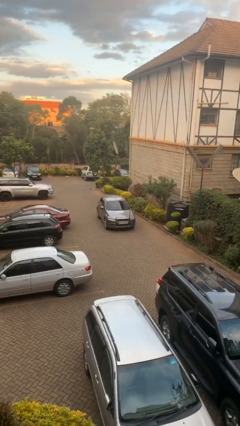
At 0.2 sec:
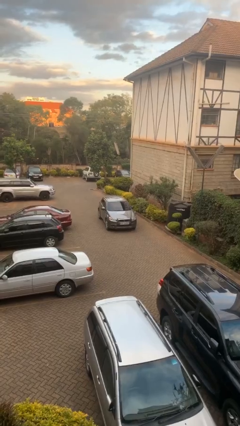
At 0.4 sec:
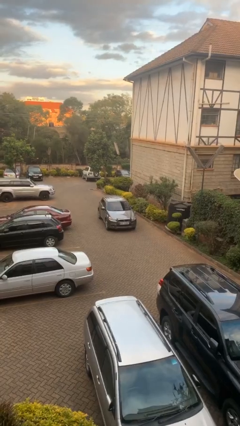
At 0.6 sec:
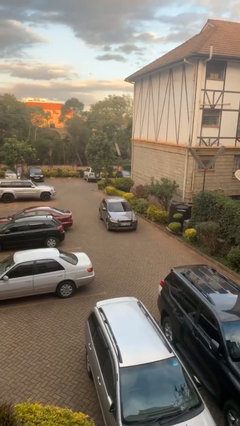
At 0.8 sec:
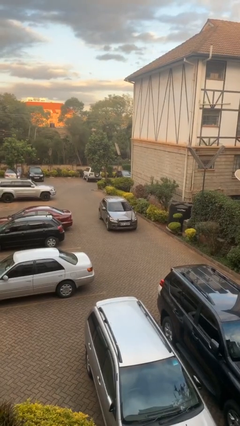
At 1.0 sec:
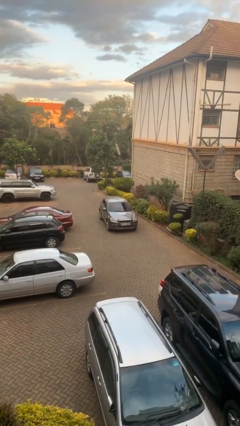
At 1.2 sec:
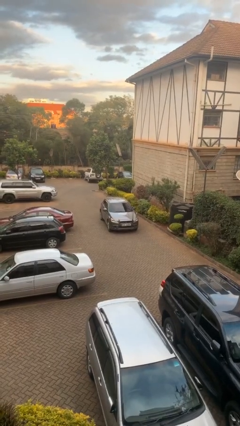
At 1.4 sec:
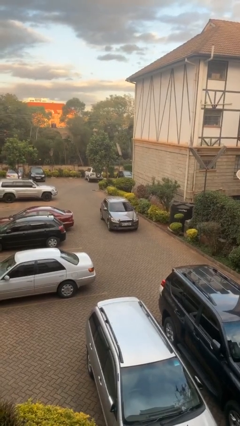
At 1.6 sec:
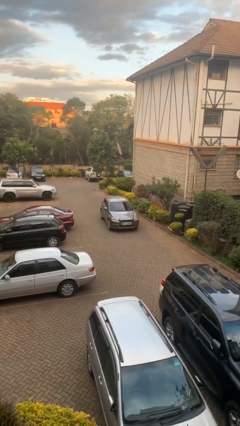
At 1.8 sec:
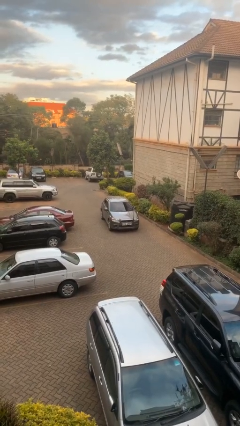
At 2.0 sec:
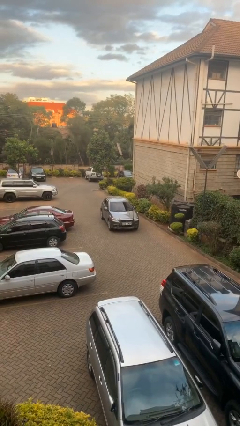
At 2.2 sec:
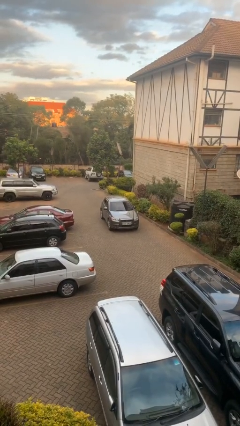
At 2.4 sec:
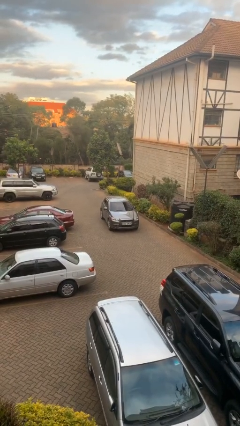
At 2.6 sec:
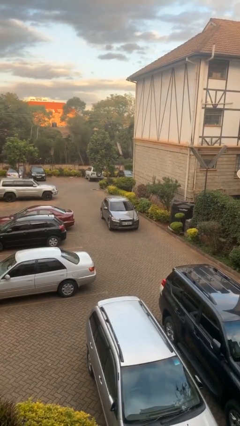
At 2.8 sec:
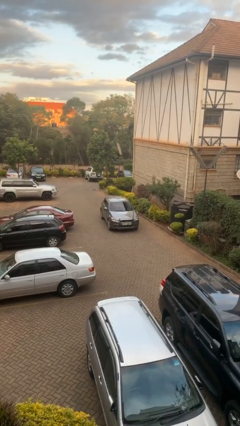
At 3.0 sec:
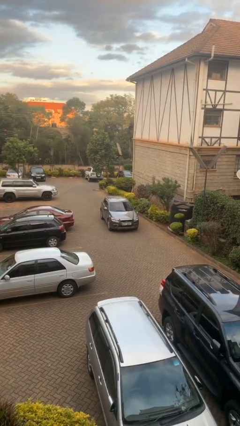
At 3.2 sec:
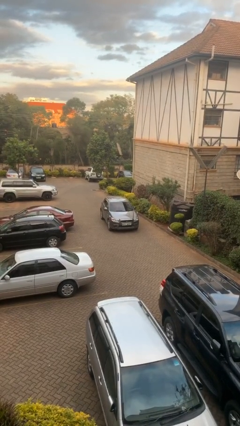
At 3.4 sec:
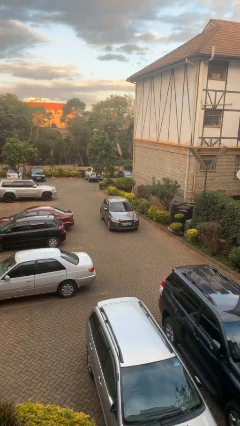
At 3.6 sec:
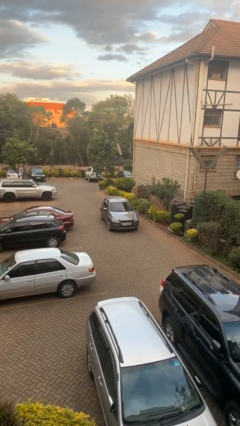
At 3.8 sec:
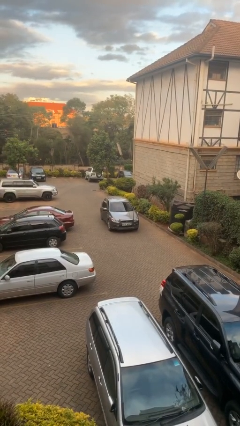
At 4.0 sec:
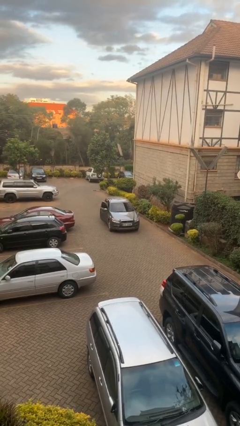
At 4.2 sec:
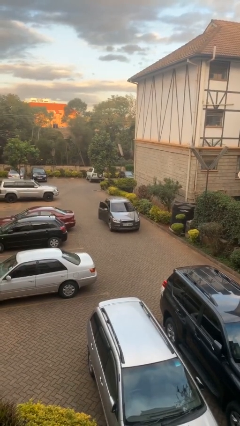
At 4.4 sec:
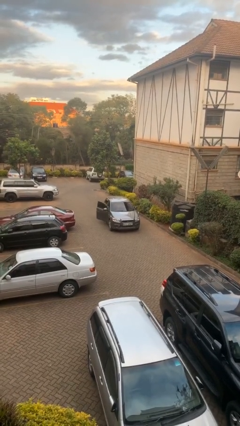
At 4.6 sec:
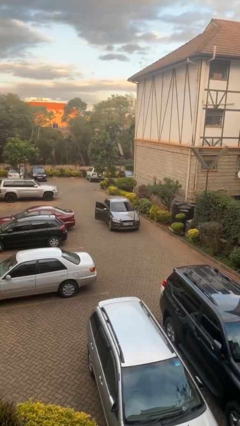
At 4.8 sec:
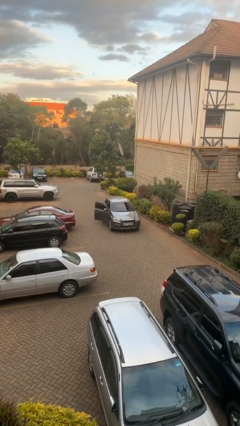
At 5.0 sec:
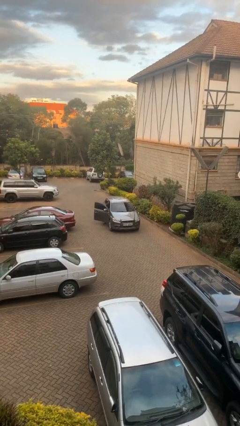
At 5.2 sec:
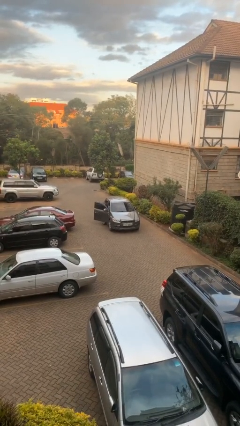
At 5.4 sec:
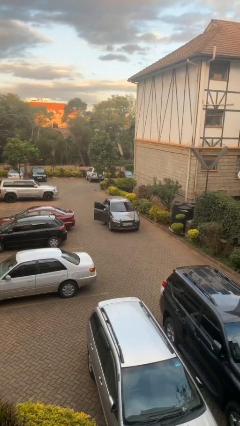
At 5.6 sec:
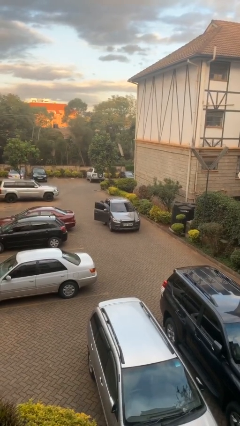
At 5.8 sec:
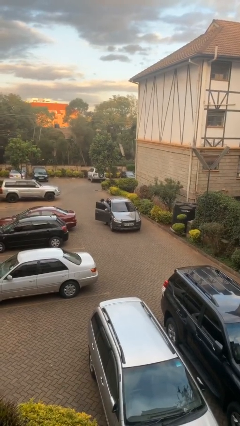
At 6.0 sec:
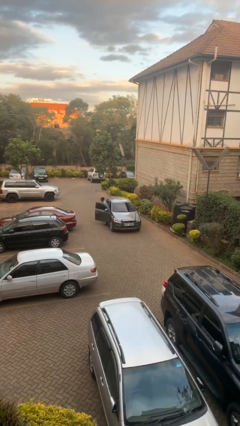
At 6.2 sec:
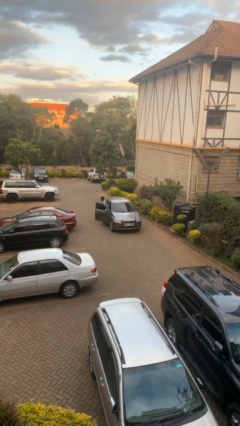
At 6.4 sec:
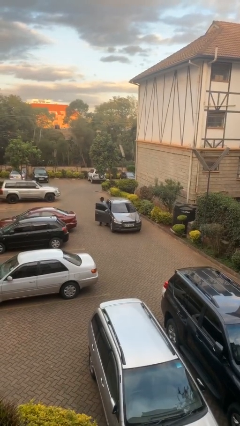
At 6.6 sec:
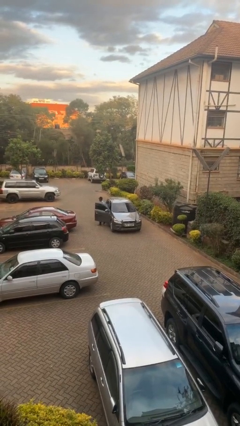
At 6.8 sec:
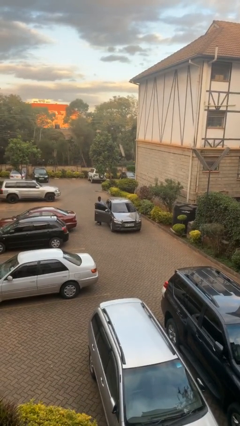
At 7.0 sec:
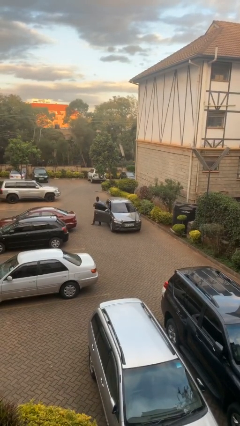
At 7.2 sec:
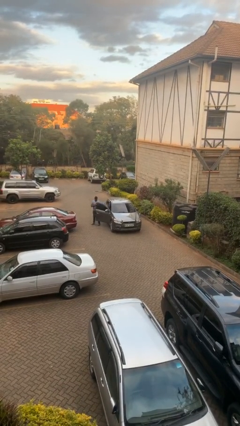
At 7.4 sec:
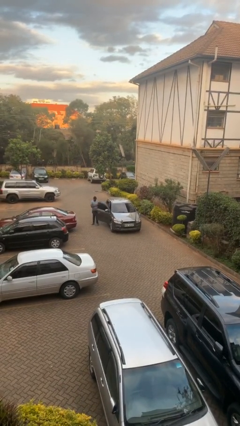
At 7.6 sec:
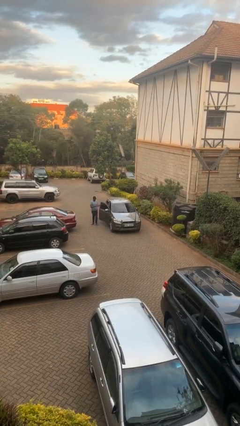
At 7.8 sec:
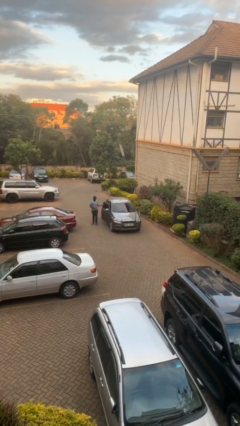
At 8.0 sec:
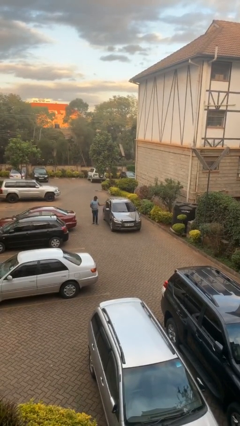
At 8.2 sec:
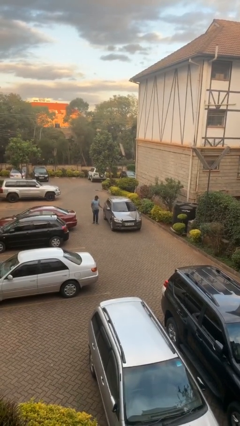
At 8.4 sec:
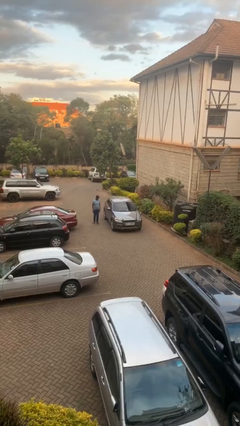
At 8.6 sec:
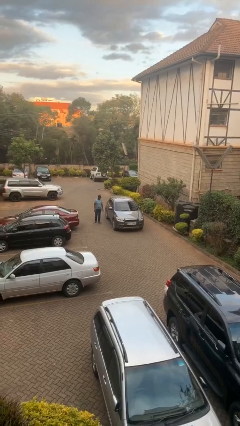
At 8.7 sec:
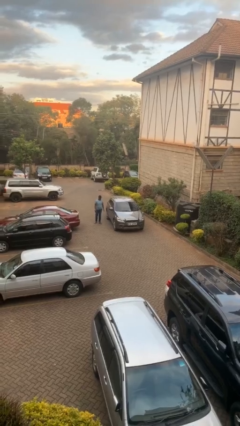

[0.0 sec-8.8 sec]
car drops off person

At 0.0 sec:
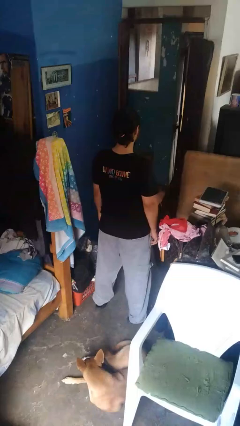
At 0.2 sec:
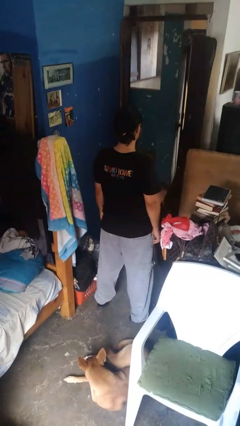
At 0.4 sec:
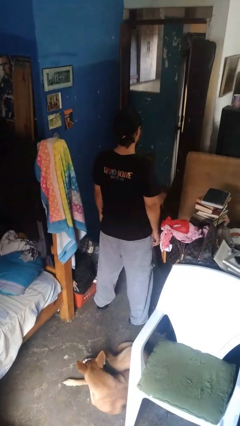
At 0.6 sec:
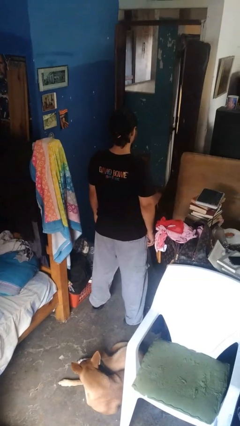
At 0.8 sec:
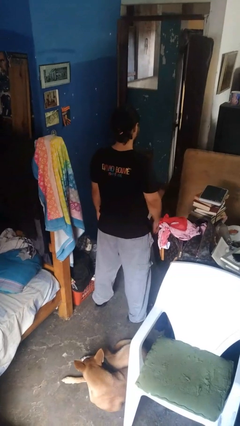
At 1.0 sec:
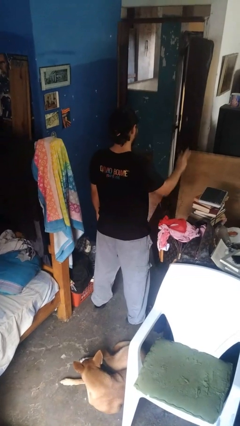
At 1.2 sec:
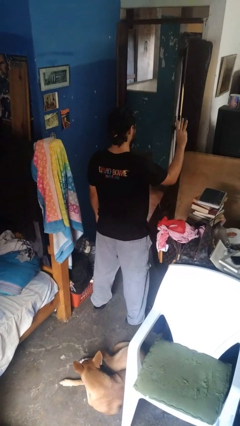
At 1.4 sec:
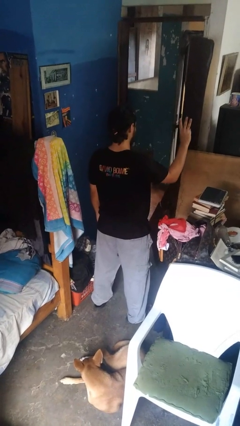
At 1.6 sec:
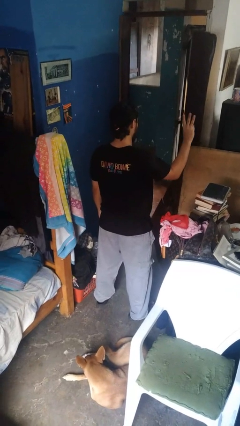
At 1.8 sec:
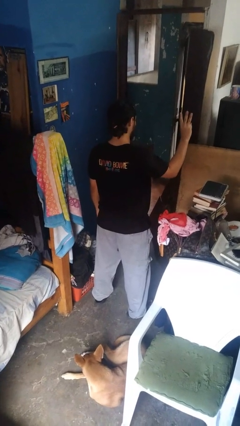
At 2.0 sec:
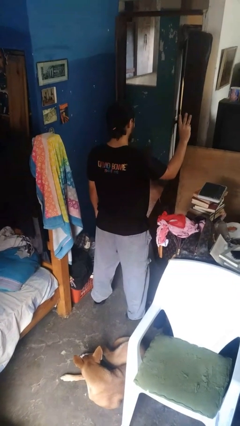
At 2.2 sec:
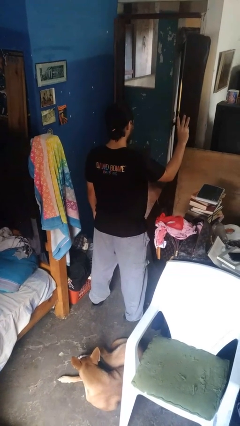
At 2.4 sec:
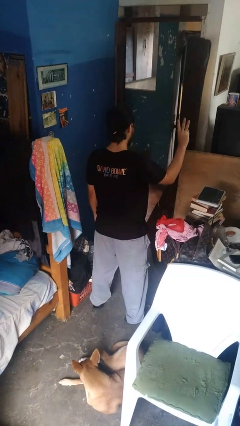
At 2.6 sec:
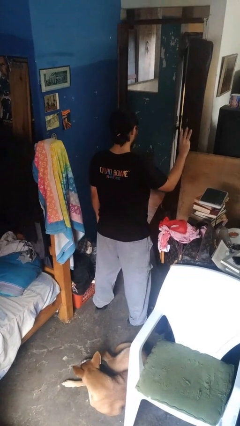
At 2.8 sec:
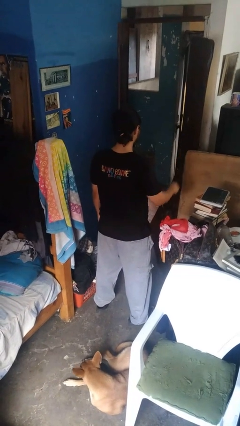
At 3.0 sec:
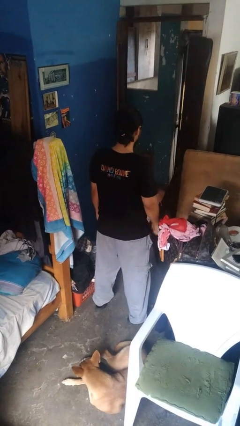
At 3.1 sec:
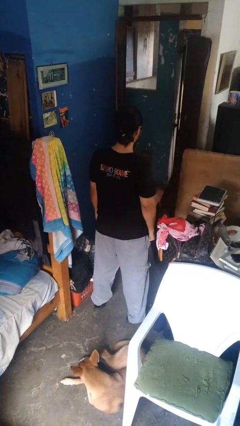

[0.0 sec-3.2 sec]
person gestures number three

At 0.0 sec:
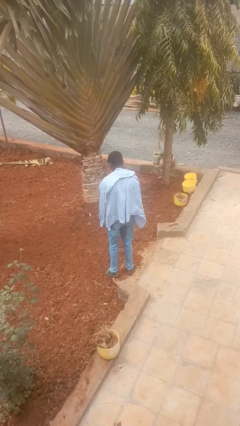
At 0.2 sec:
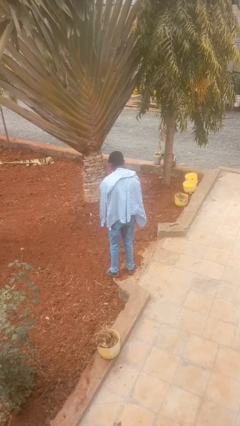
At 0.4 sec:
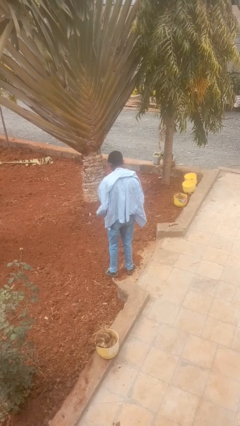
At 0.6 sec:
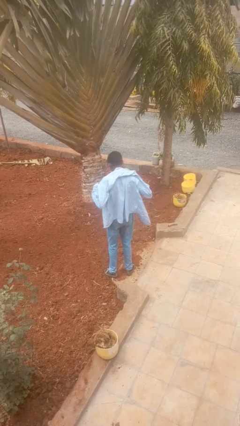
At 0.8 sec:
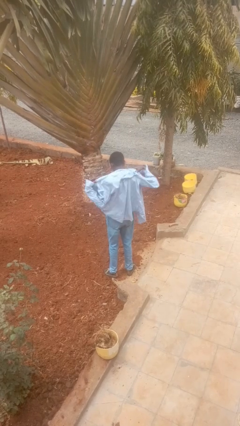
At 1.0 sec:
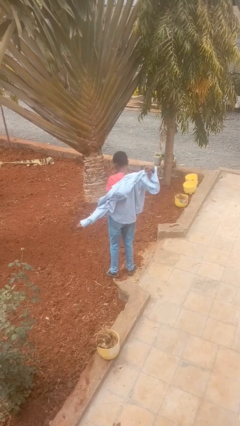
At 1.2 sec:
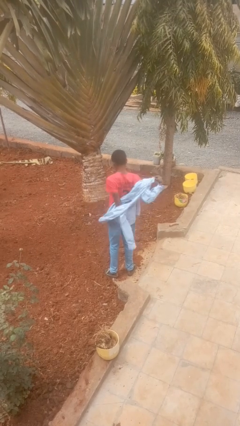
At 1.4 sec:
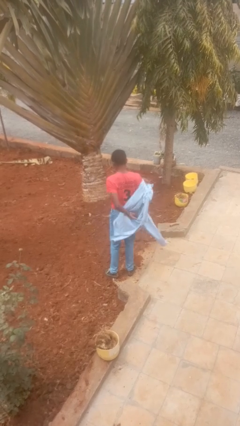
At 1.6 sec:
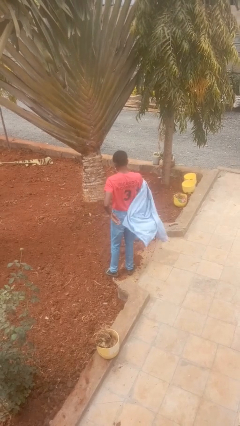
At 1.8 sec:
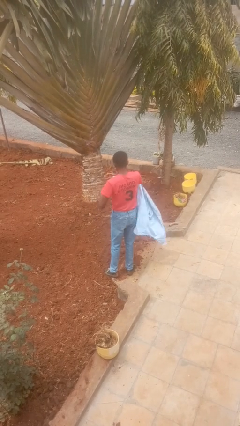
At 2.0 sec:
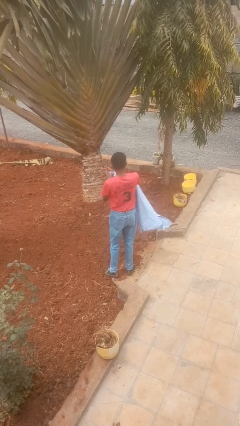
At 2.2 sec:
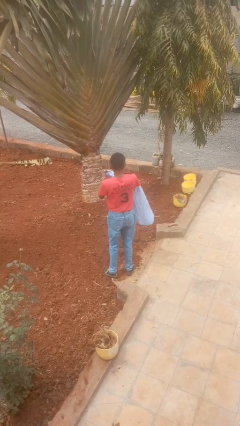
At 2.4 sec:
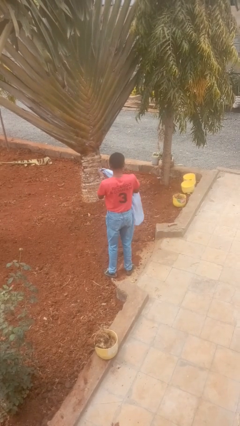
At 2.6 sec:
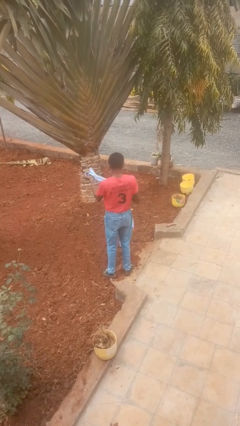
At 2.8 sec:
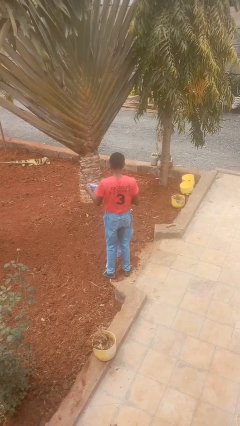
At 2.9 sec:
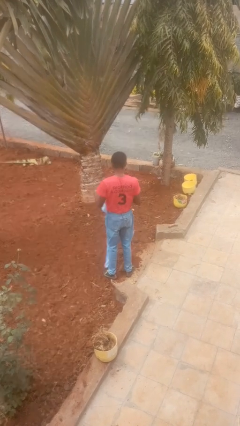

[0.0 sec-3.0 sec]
person takes off shirt

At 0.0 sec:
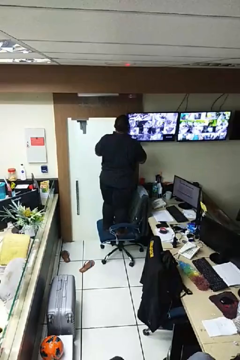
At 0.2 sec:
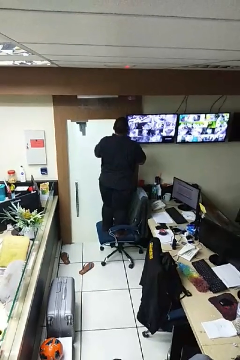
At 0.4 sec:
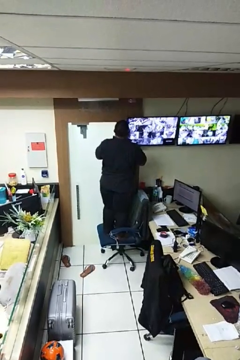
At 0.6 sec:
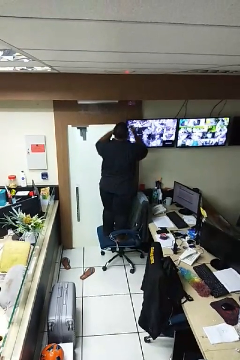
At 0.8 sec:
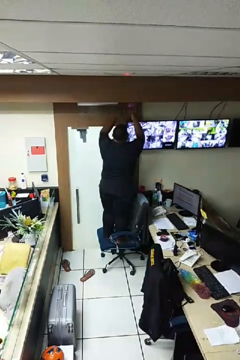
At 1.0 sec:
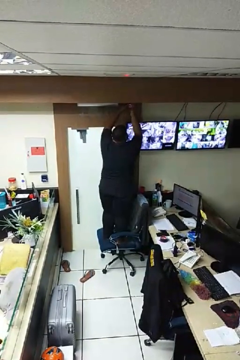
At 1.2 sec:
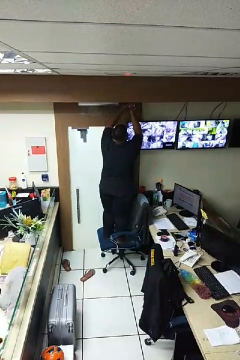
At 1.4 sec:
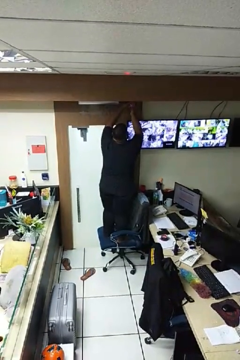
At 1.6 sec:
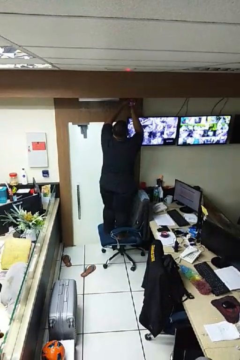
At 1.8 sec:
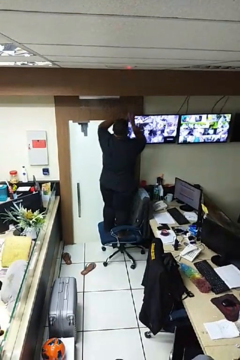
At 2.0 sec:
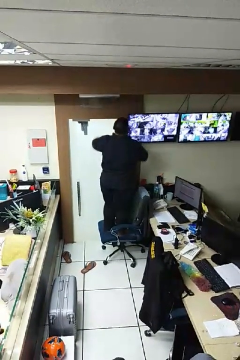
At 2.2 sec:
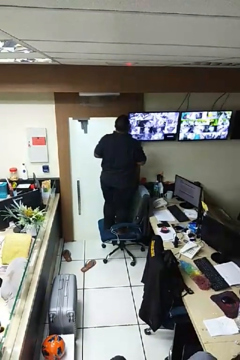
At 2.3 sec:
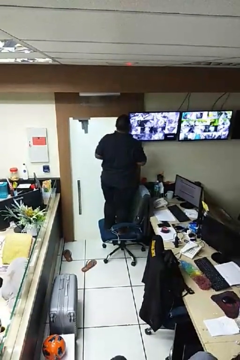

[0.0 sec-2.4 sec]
person takes down smoke detector

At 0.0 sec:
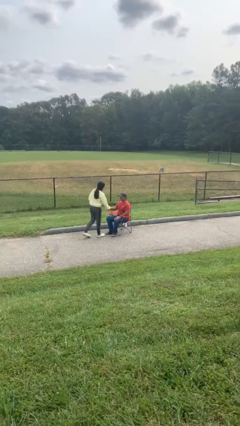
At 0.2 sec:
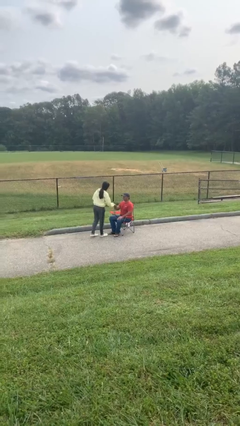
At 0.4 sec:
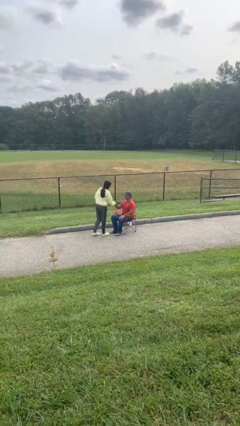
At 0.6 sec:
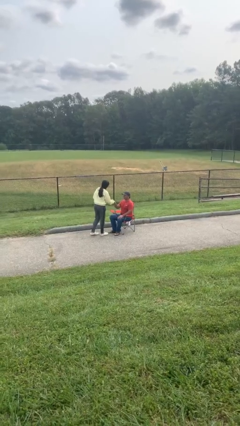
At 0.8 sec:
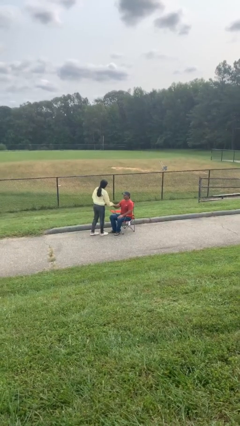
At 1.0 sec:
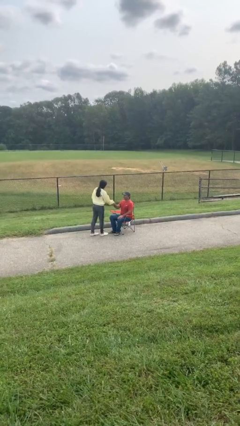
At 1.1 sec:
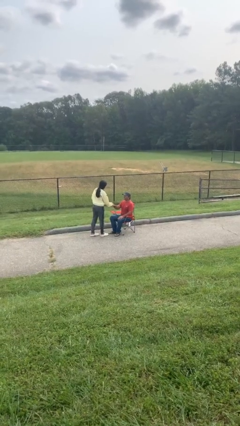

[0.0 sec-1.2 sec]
person shakes hand
